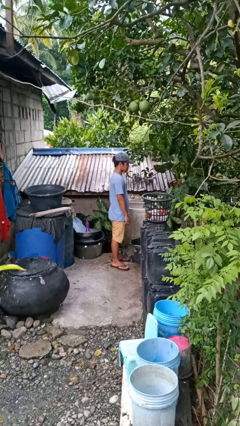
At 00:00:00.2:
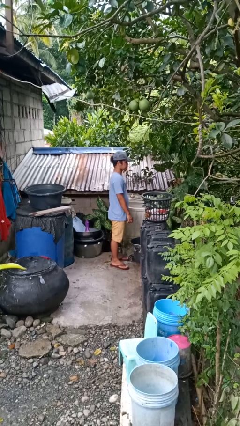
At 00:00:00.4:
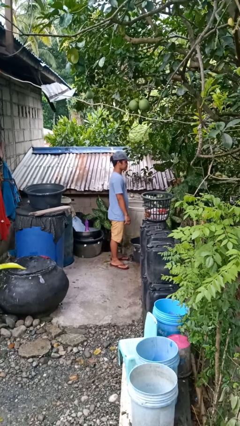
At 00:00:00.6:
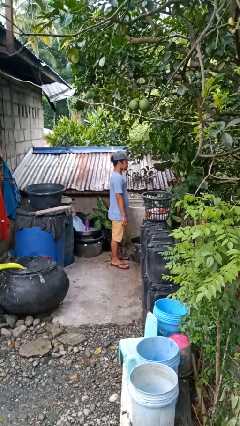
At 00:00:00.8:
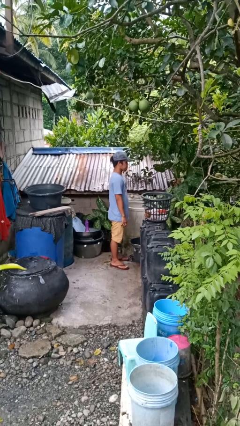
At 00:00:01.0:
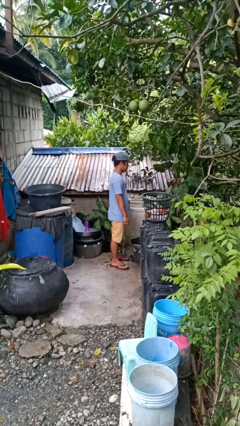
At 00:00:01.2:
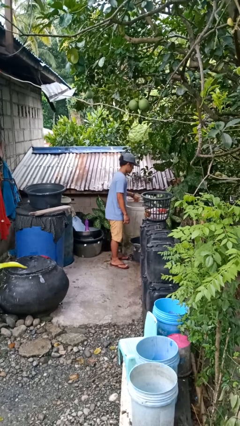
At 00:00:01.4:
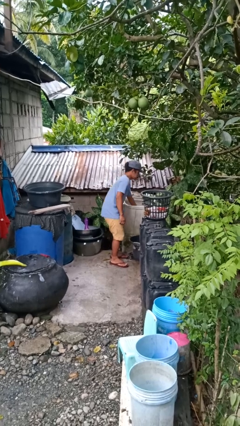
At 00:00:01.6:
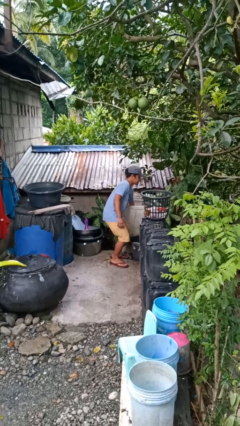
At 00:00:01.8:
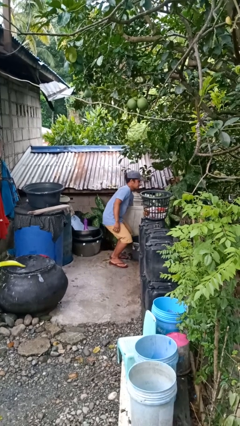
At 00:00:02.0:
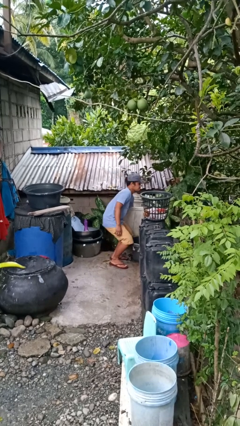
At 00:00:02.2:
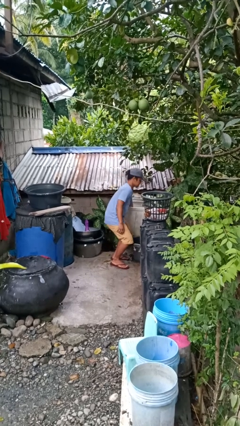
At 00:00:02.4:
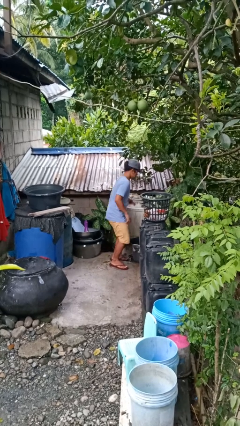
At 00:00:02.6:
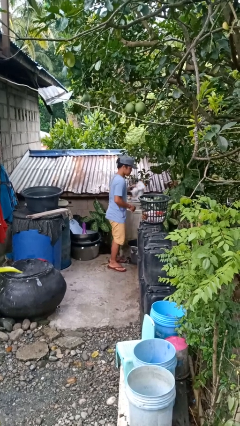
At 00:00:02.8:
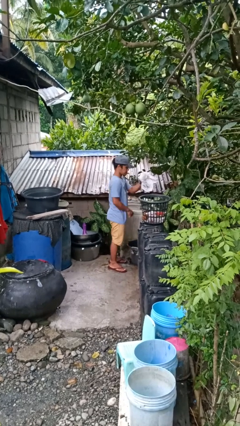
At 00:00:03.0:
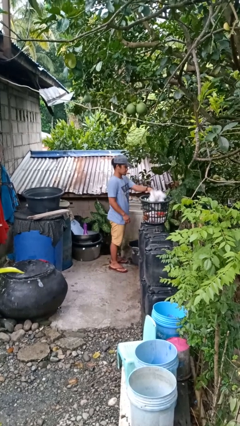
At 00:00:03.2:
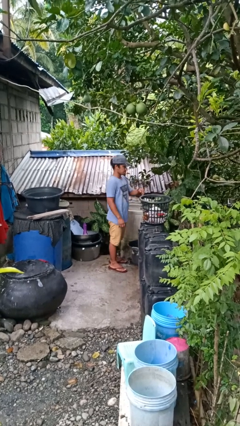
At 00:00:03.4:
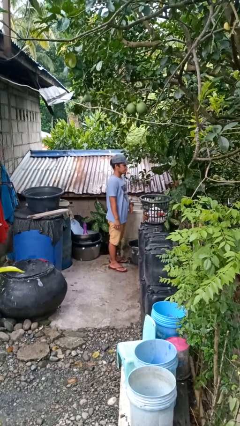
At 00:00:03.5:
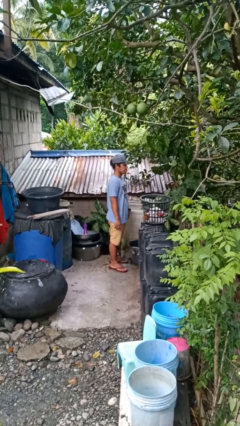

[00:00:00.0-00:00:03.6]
person unloads dishwasher

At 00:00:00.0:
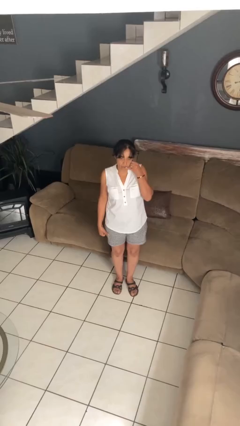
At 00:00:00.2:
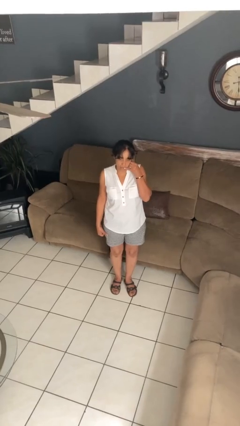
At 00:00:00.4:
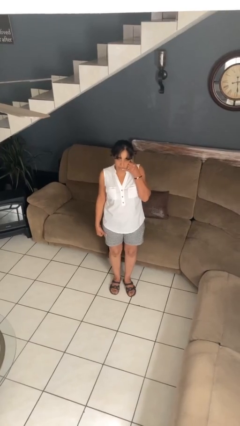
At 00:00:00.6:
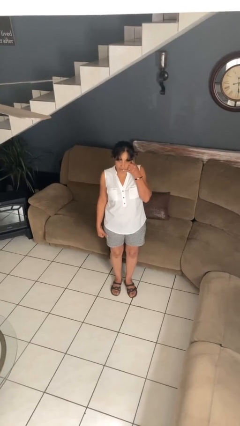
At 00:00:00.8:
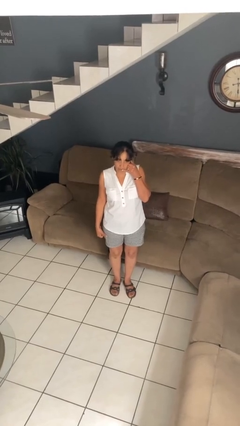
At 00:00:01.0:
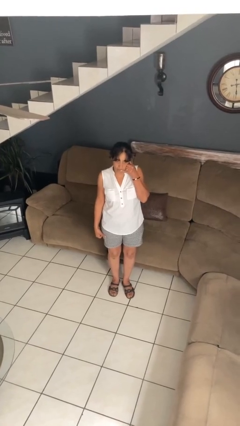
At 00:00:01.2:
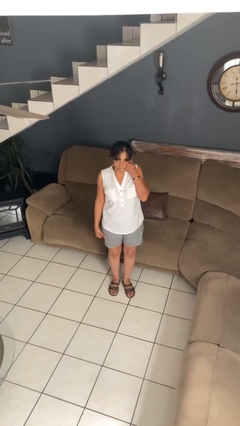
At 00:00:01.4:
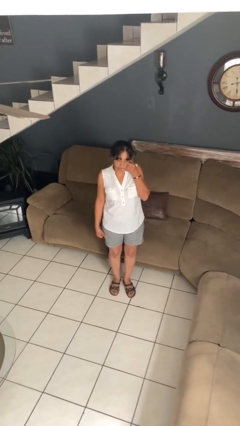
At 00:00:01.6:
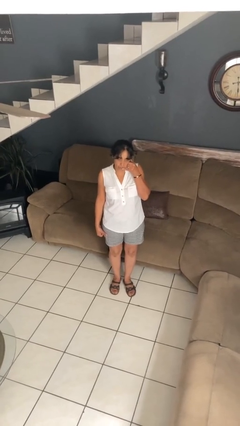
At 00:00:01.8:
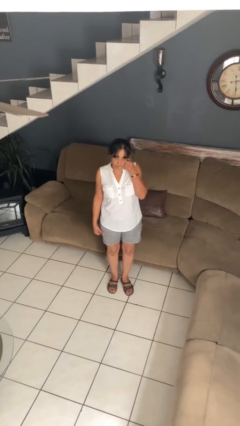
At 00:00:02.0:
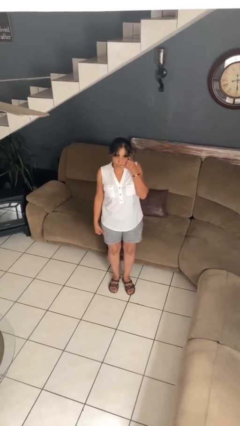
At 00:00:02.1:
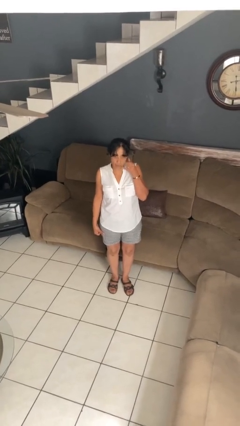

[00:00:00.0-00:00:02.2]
person gestures call me

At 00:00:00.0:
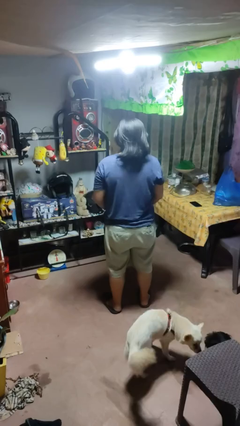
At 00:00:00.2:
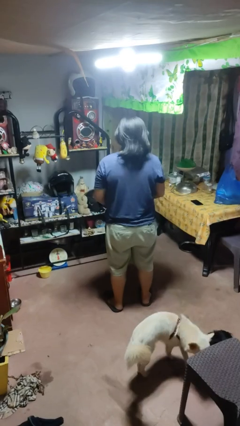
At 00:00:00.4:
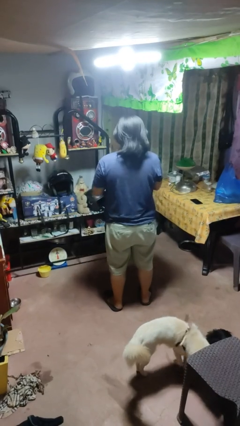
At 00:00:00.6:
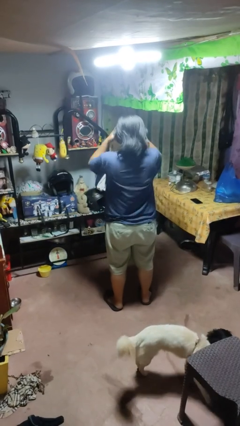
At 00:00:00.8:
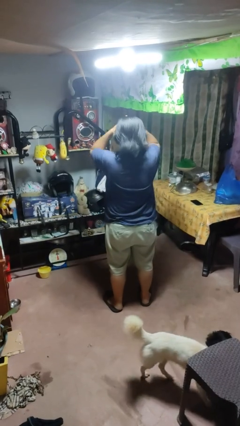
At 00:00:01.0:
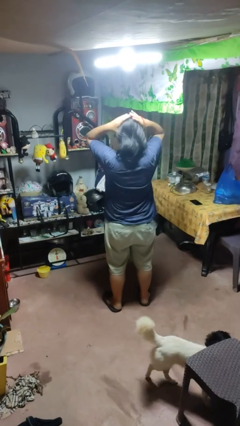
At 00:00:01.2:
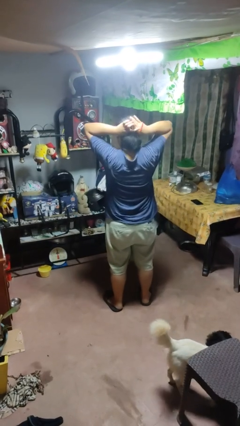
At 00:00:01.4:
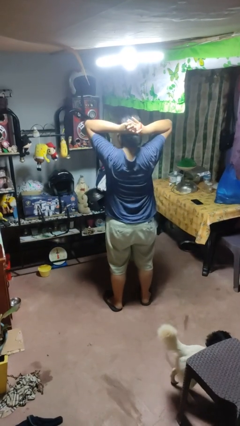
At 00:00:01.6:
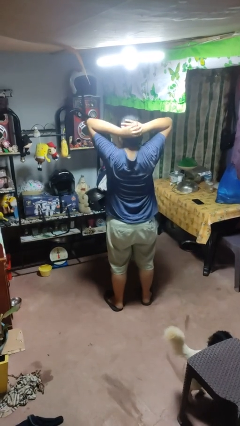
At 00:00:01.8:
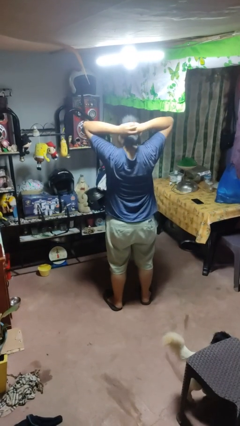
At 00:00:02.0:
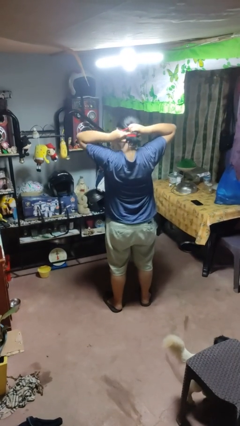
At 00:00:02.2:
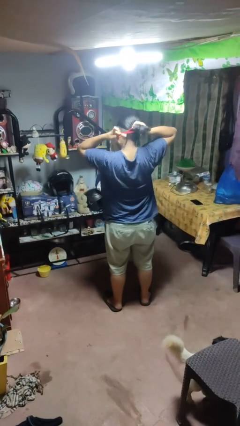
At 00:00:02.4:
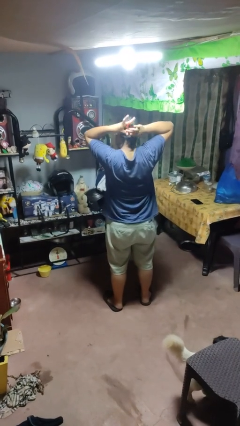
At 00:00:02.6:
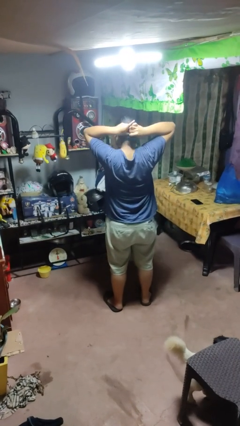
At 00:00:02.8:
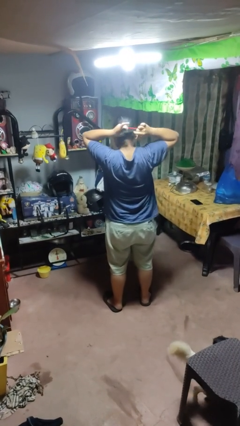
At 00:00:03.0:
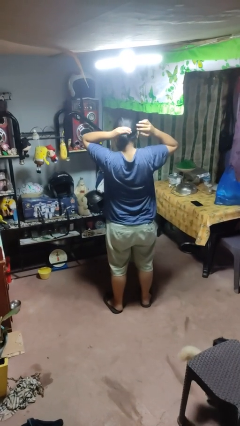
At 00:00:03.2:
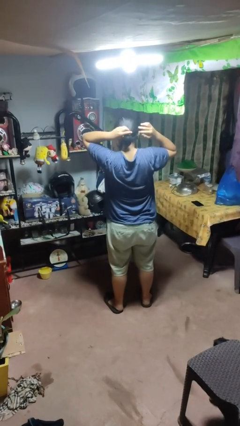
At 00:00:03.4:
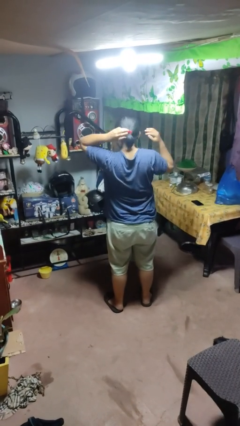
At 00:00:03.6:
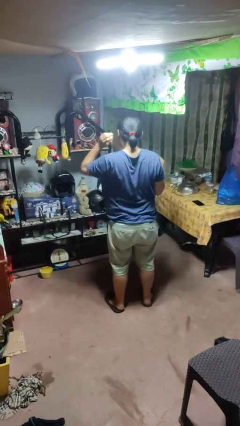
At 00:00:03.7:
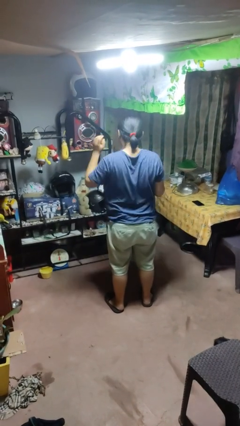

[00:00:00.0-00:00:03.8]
person puts hair in ponytail

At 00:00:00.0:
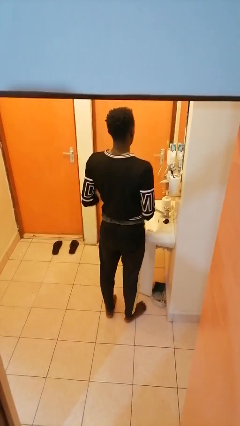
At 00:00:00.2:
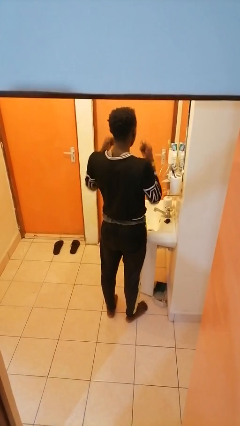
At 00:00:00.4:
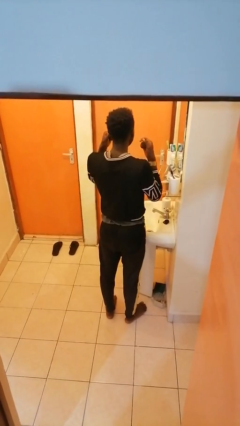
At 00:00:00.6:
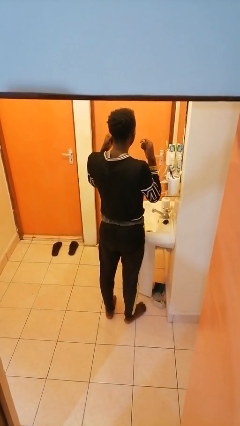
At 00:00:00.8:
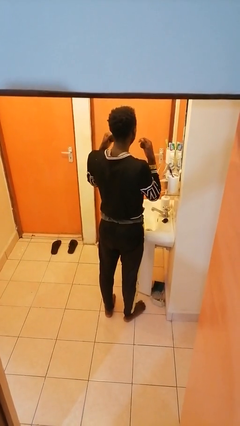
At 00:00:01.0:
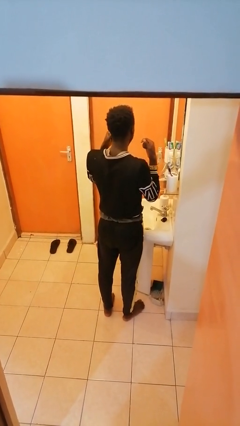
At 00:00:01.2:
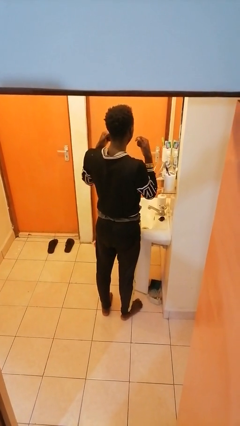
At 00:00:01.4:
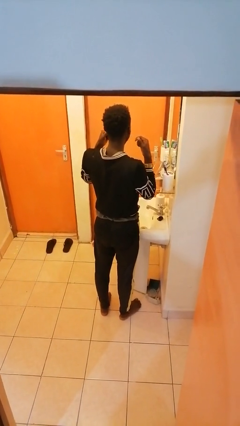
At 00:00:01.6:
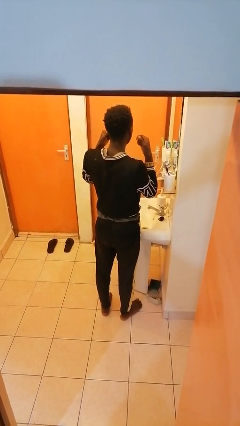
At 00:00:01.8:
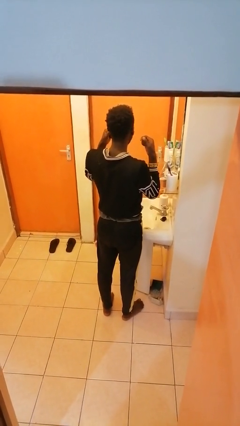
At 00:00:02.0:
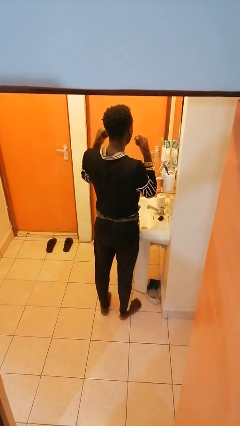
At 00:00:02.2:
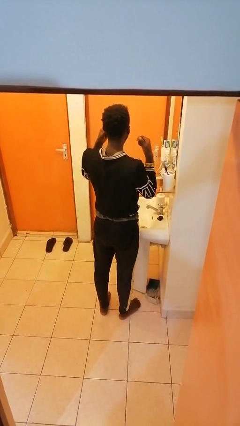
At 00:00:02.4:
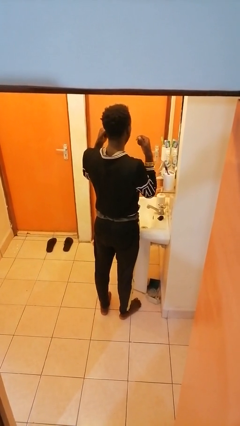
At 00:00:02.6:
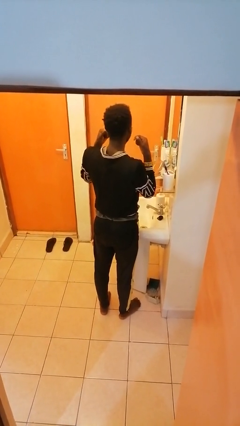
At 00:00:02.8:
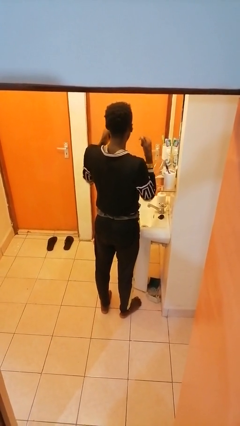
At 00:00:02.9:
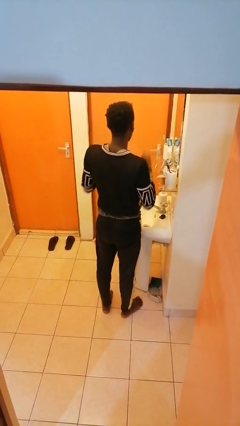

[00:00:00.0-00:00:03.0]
person flosses

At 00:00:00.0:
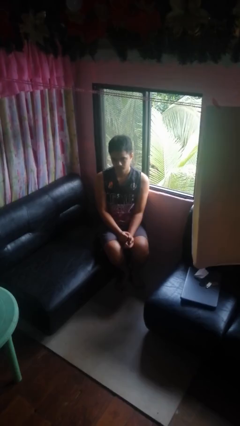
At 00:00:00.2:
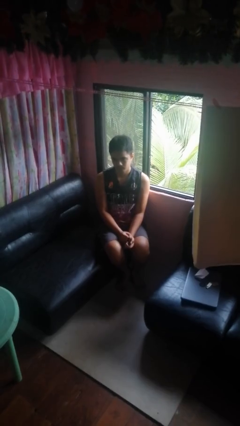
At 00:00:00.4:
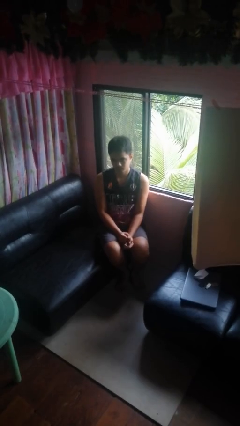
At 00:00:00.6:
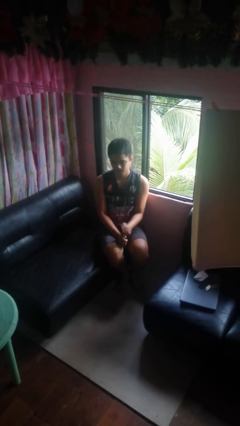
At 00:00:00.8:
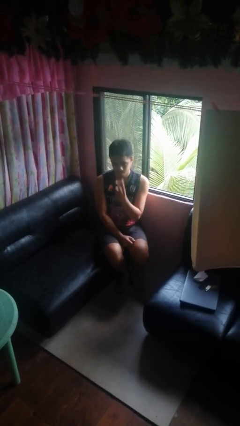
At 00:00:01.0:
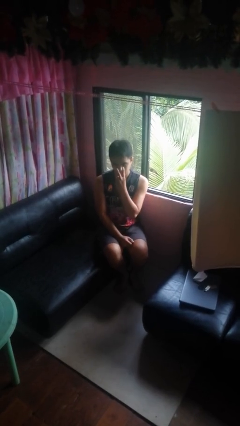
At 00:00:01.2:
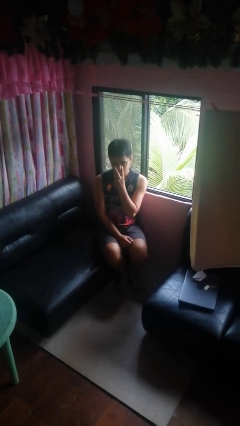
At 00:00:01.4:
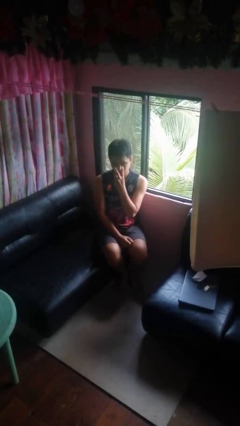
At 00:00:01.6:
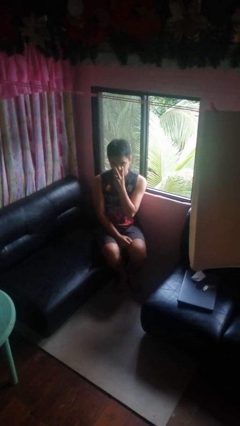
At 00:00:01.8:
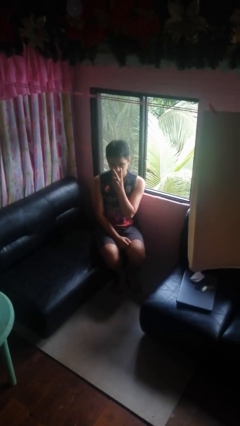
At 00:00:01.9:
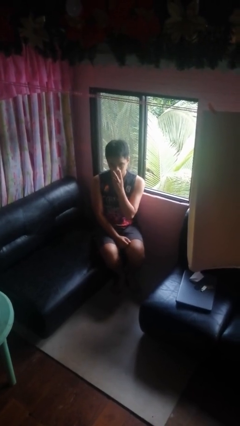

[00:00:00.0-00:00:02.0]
person gestures watch closely

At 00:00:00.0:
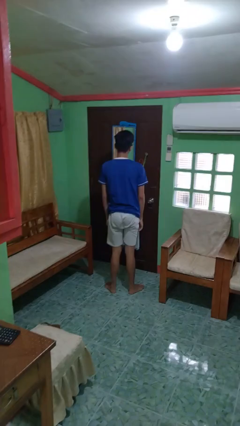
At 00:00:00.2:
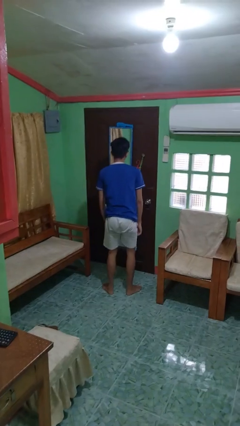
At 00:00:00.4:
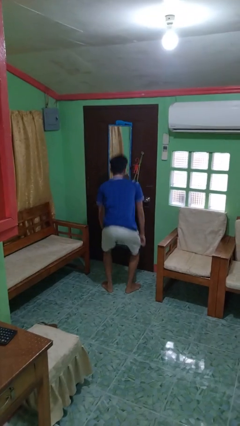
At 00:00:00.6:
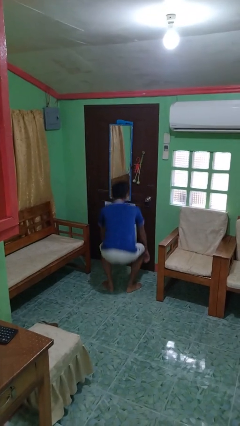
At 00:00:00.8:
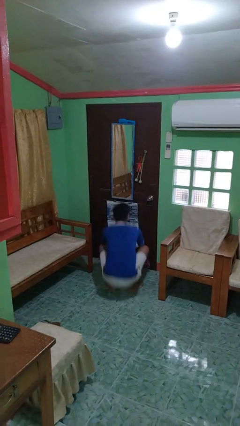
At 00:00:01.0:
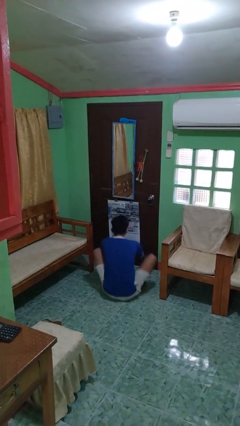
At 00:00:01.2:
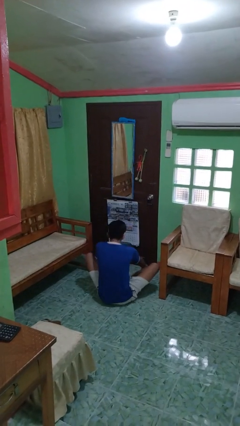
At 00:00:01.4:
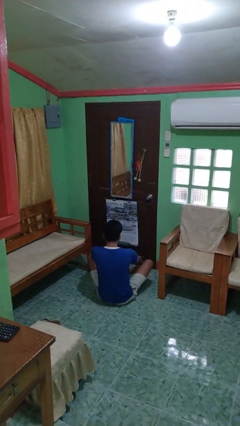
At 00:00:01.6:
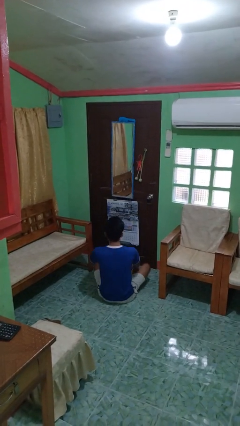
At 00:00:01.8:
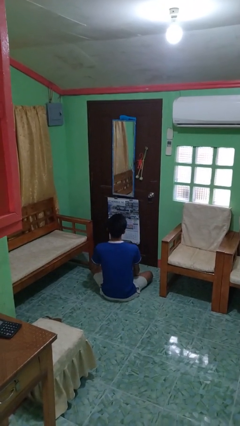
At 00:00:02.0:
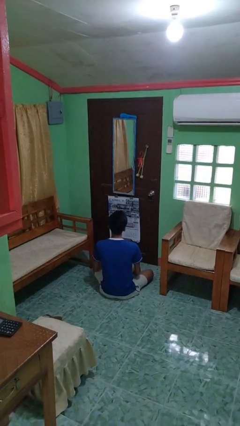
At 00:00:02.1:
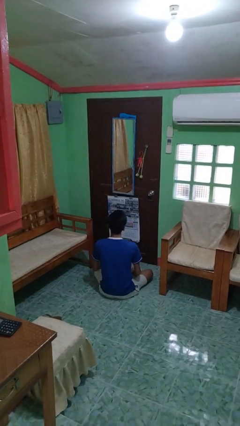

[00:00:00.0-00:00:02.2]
person sits crisscross
